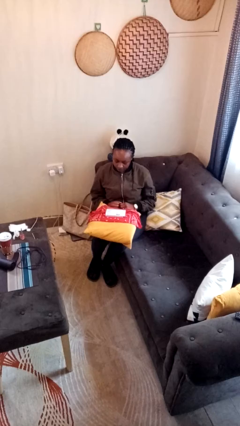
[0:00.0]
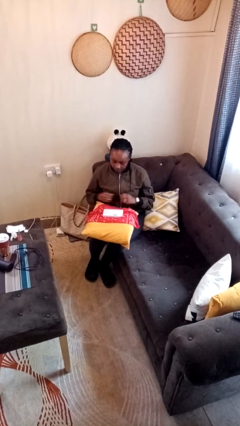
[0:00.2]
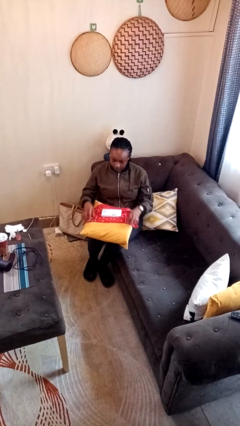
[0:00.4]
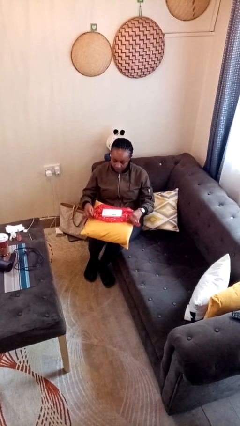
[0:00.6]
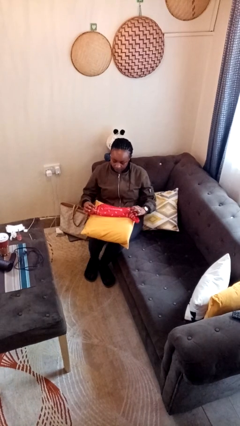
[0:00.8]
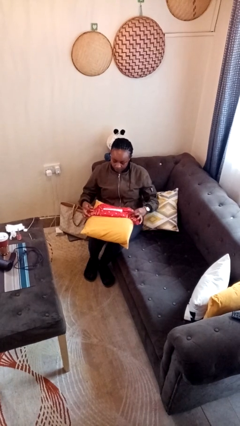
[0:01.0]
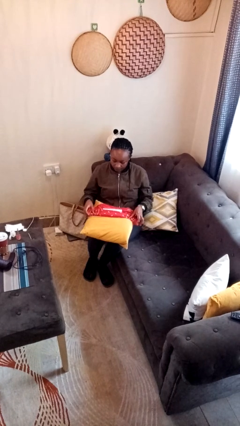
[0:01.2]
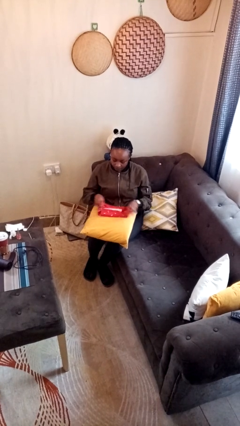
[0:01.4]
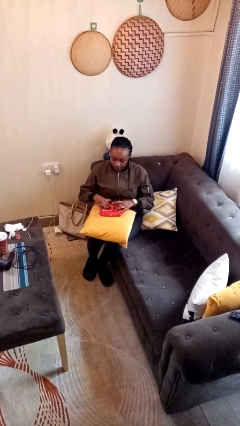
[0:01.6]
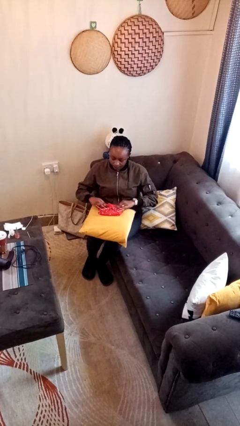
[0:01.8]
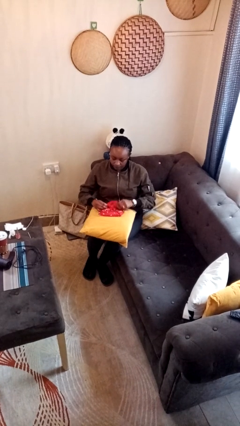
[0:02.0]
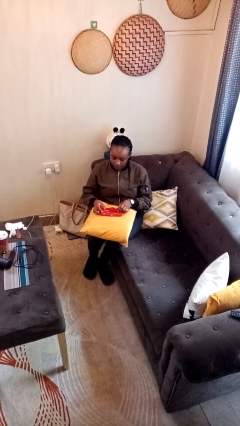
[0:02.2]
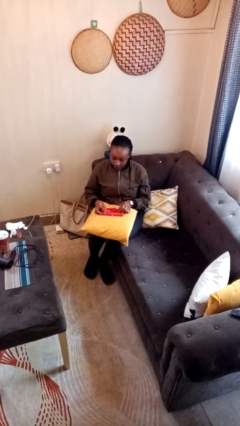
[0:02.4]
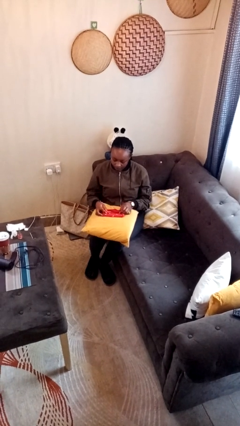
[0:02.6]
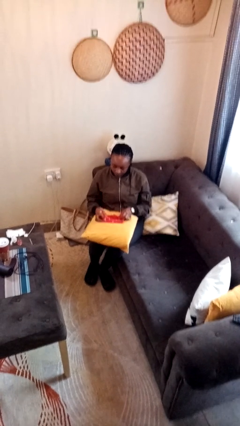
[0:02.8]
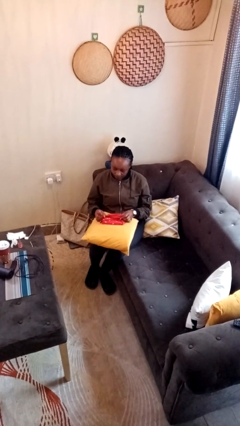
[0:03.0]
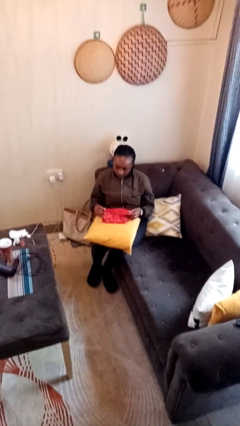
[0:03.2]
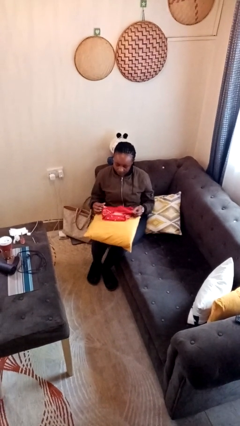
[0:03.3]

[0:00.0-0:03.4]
person wraps box

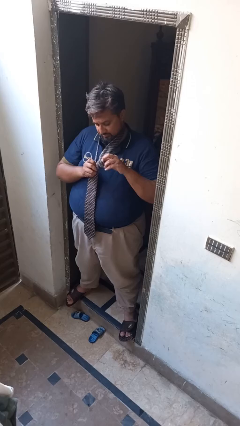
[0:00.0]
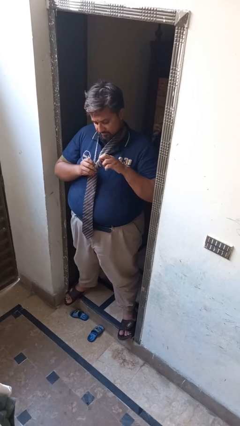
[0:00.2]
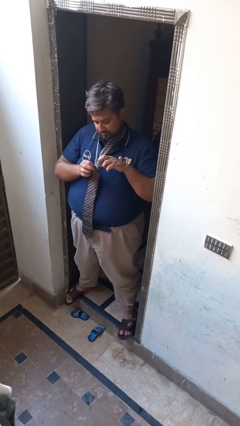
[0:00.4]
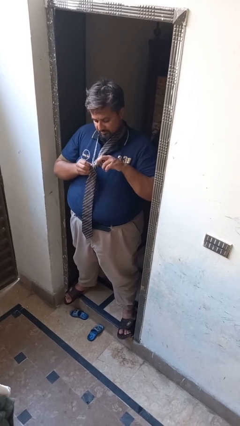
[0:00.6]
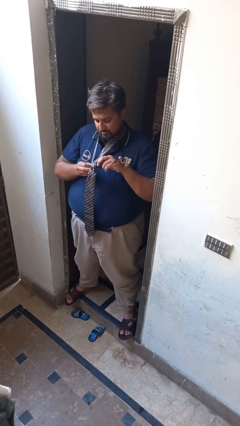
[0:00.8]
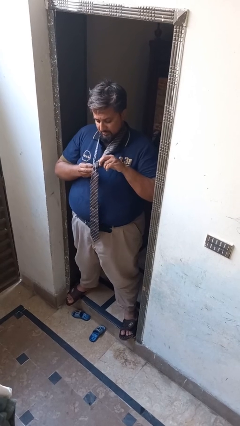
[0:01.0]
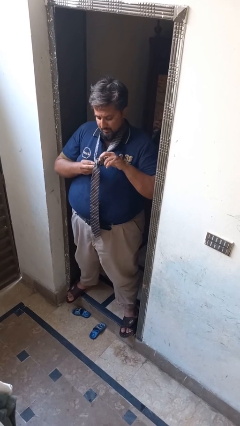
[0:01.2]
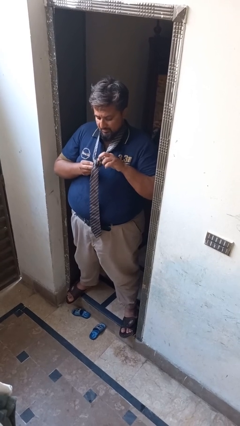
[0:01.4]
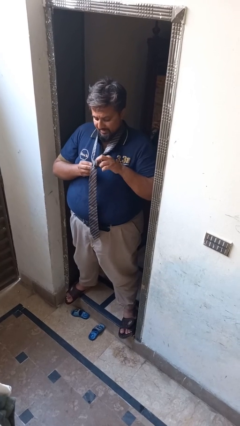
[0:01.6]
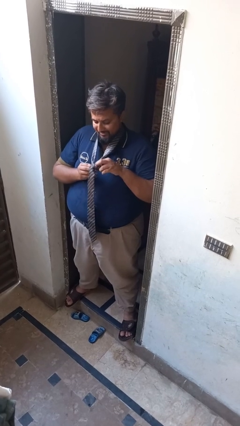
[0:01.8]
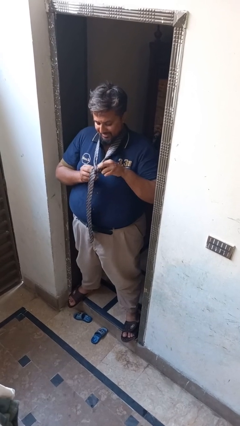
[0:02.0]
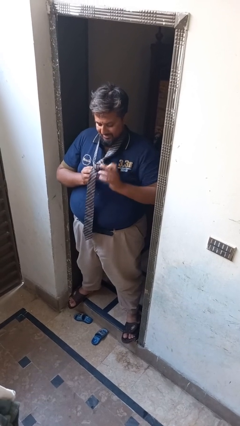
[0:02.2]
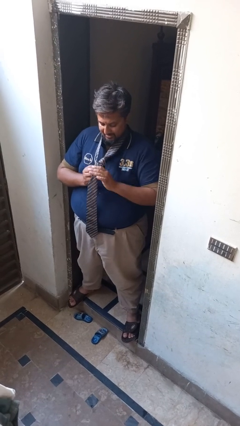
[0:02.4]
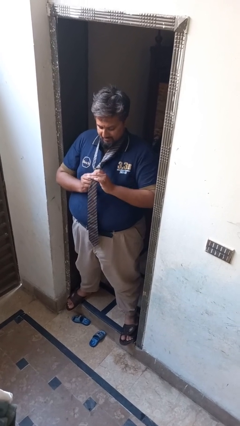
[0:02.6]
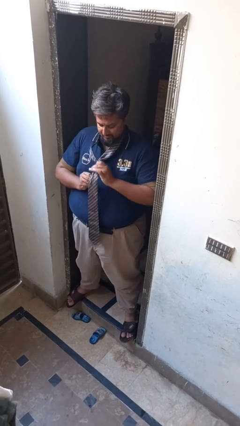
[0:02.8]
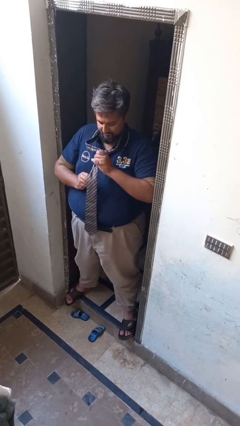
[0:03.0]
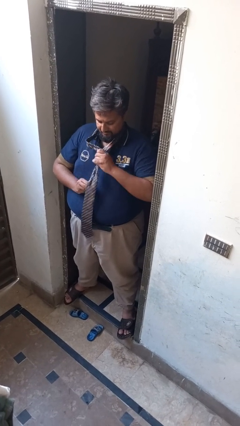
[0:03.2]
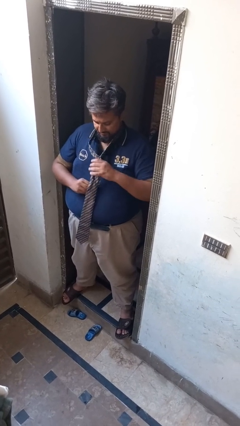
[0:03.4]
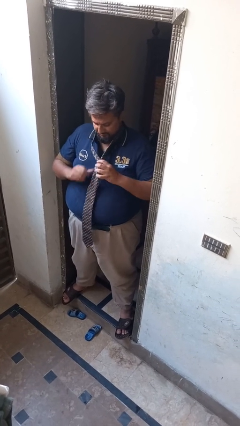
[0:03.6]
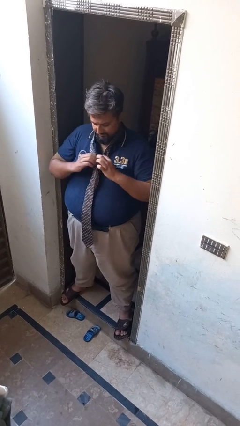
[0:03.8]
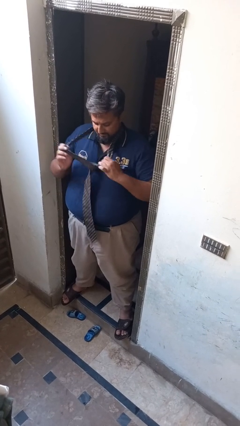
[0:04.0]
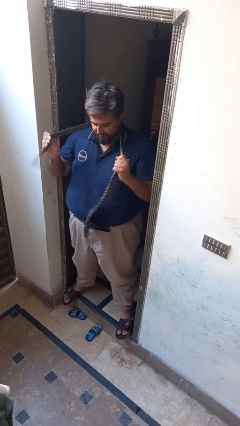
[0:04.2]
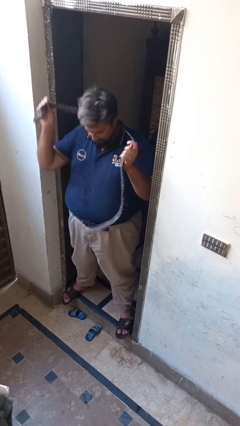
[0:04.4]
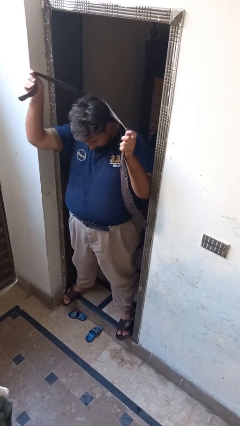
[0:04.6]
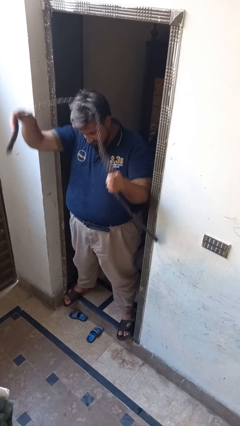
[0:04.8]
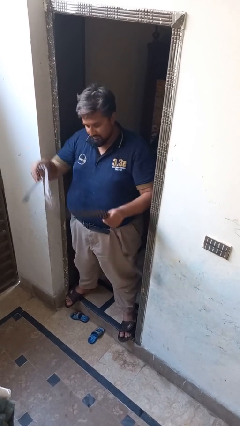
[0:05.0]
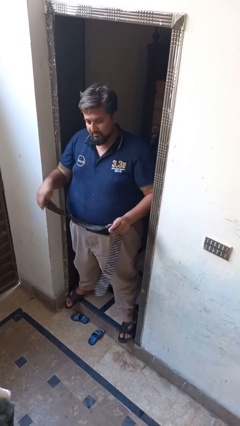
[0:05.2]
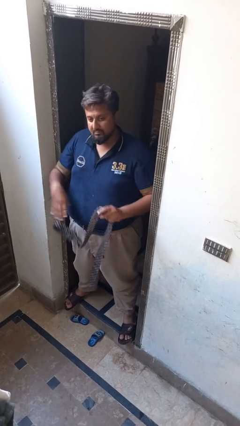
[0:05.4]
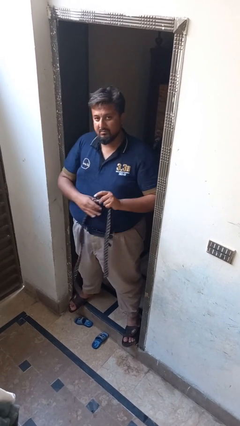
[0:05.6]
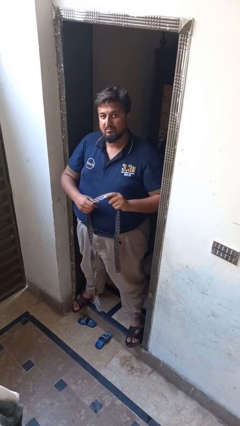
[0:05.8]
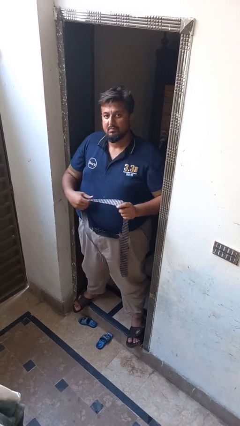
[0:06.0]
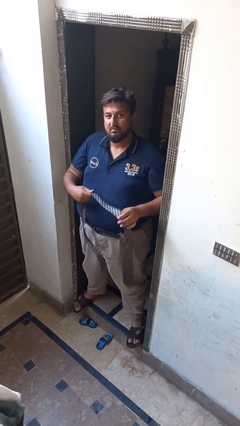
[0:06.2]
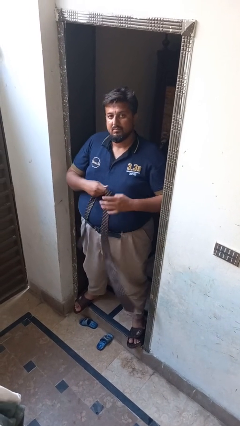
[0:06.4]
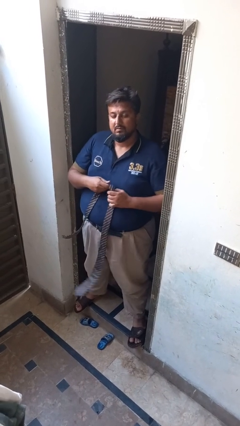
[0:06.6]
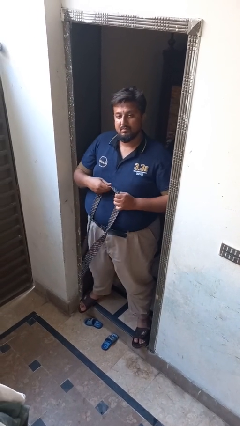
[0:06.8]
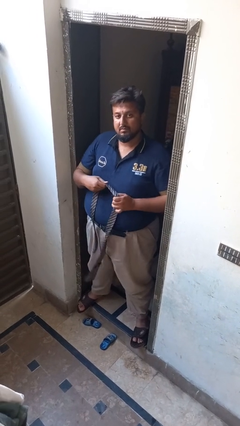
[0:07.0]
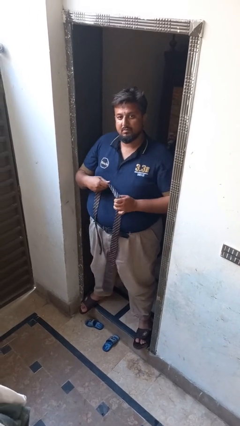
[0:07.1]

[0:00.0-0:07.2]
person takes off necktie

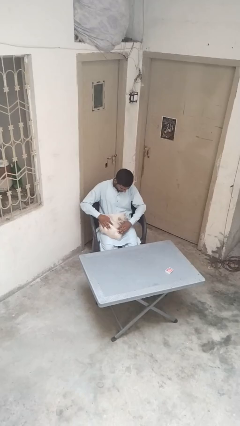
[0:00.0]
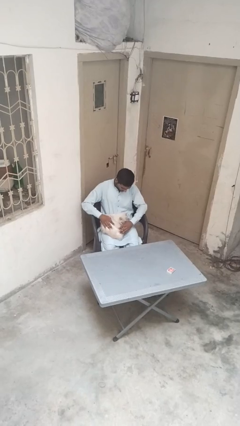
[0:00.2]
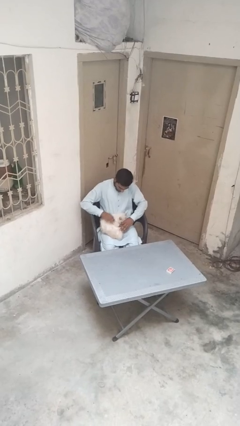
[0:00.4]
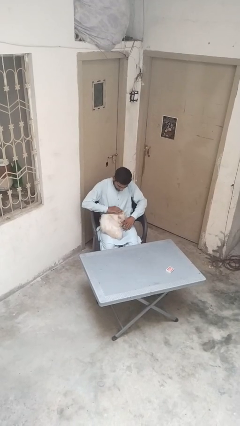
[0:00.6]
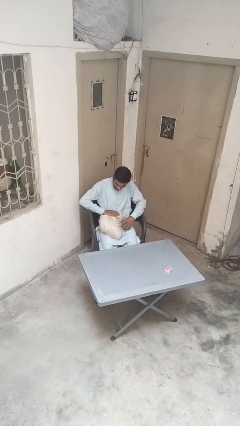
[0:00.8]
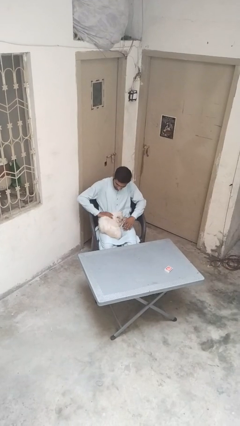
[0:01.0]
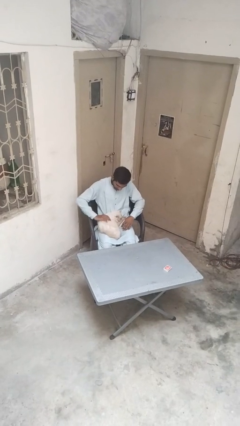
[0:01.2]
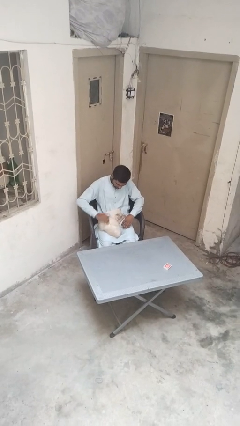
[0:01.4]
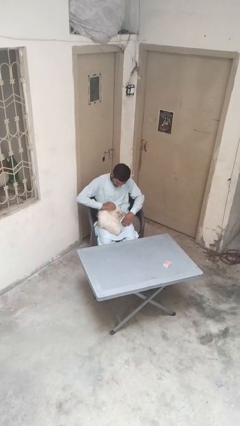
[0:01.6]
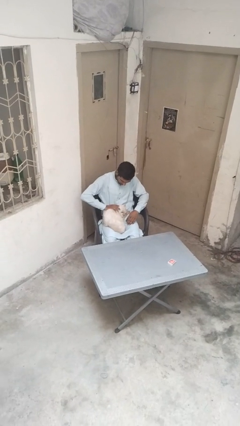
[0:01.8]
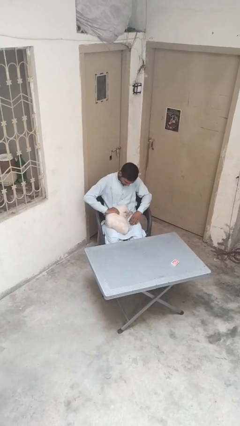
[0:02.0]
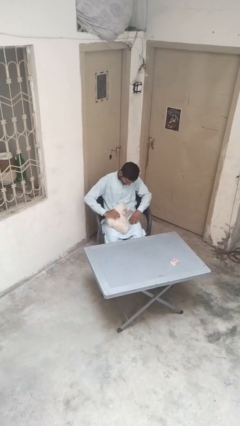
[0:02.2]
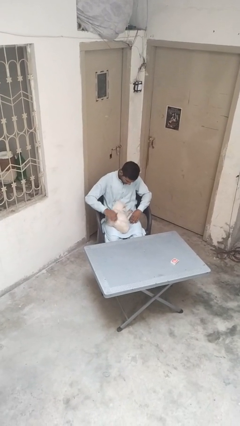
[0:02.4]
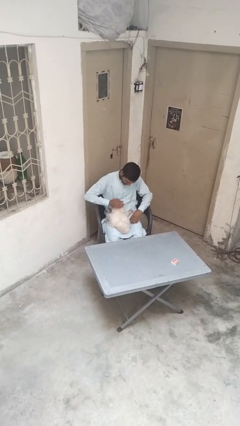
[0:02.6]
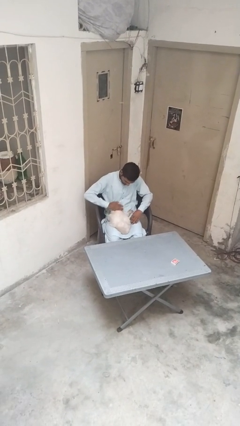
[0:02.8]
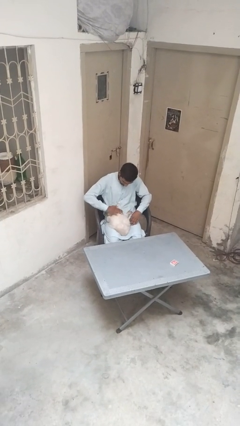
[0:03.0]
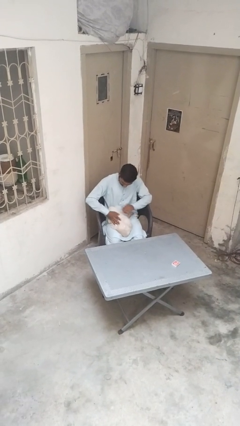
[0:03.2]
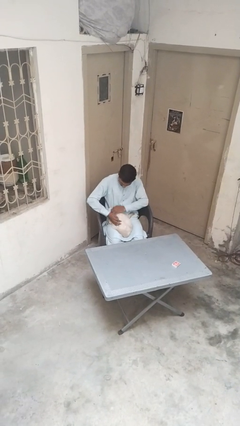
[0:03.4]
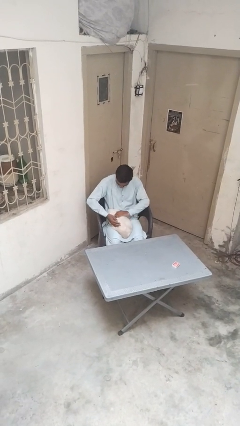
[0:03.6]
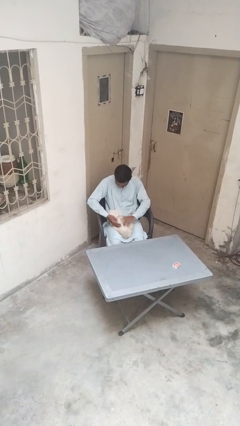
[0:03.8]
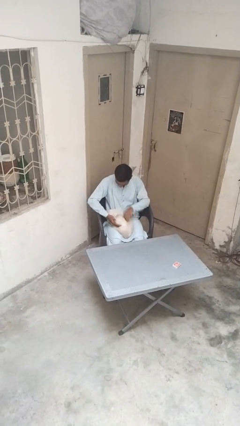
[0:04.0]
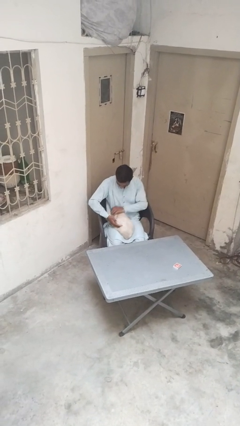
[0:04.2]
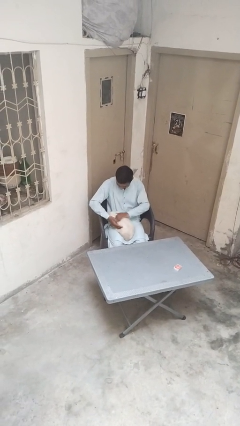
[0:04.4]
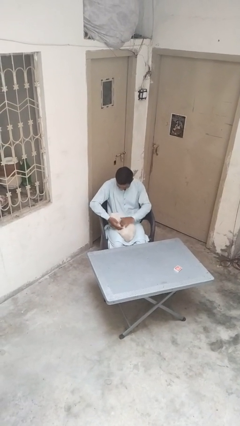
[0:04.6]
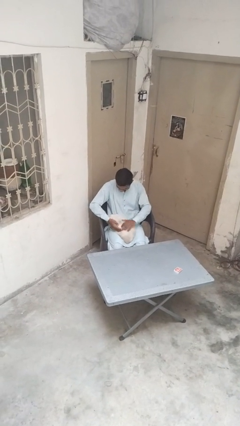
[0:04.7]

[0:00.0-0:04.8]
person pets cat

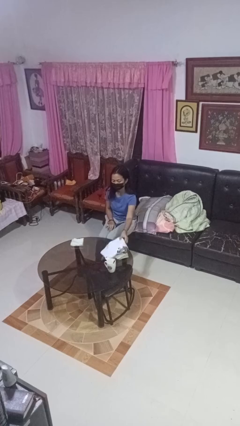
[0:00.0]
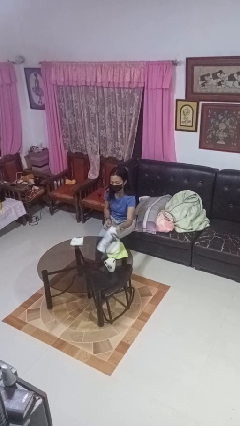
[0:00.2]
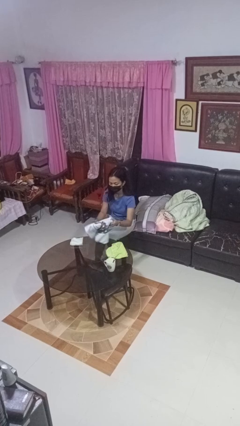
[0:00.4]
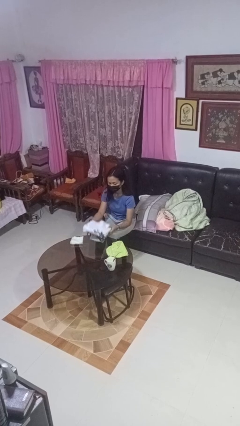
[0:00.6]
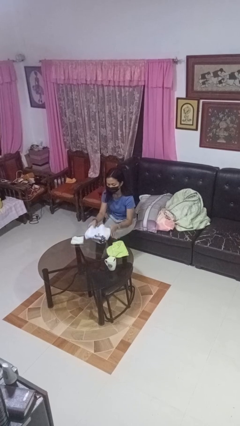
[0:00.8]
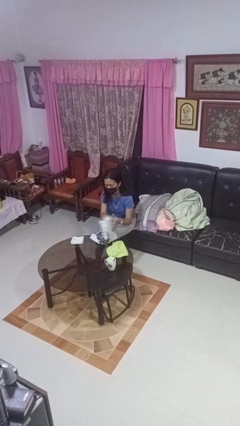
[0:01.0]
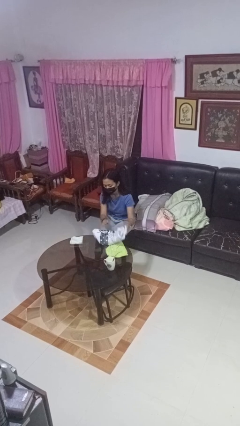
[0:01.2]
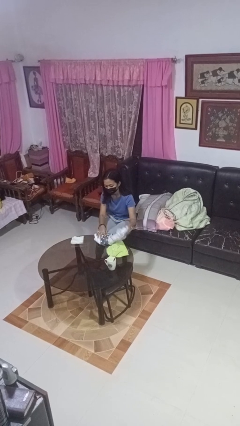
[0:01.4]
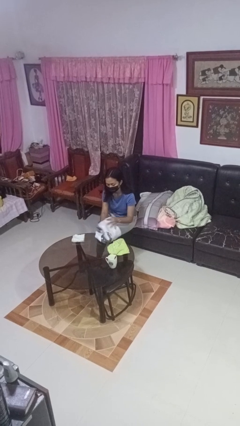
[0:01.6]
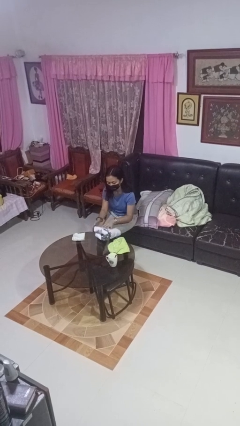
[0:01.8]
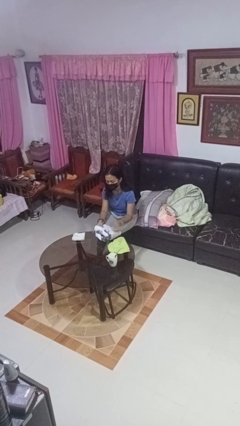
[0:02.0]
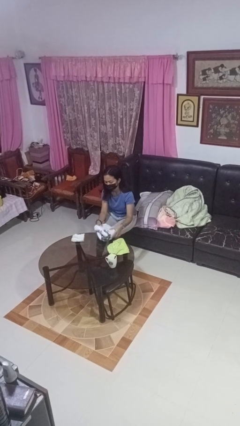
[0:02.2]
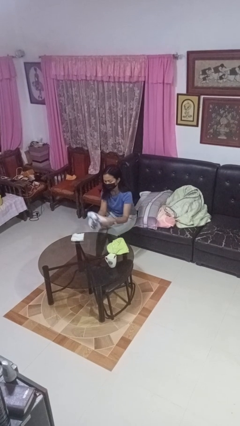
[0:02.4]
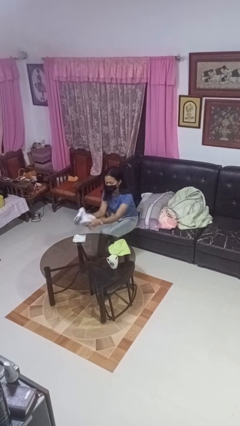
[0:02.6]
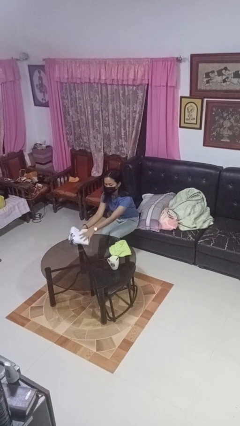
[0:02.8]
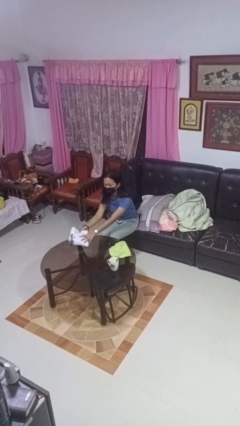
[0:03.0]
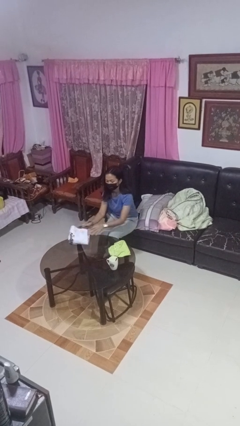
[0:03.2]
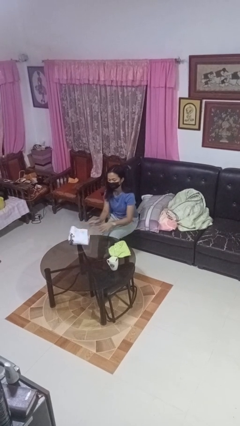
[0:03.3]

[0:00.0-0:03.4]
person folds towel
